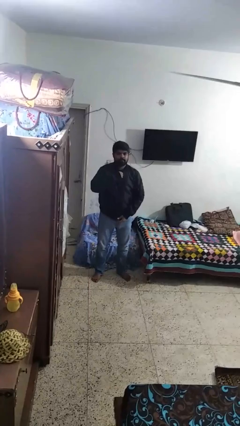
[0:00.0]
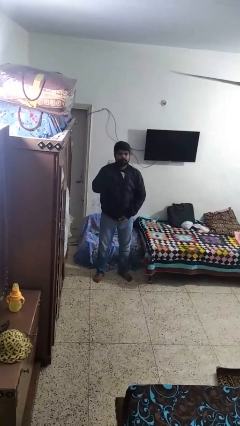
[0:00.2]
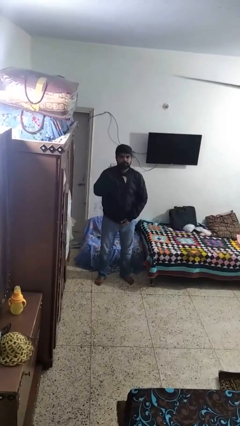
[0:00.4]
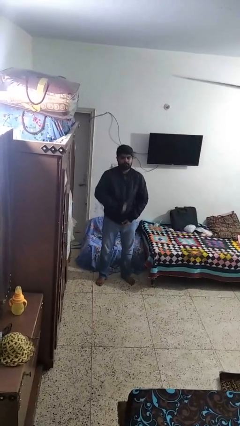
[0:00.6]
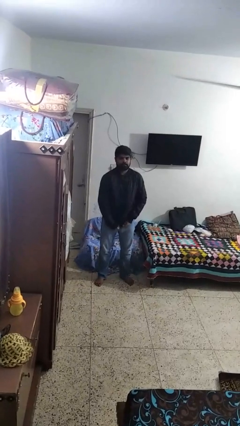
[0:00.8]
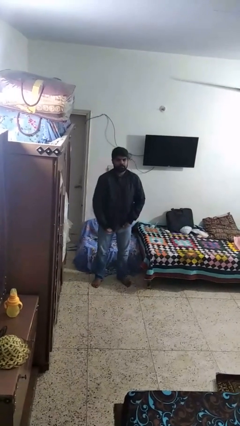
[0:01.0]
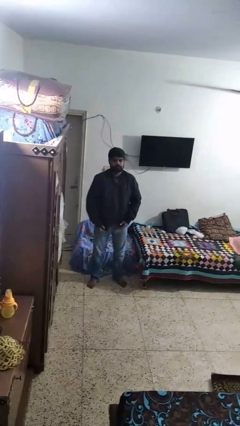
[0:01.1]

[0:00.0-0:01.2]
person unzips jacket

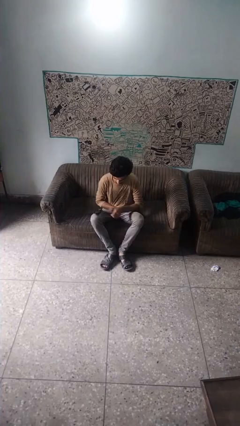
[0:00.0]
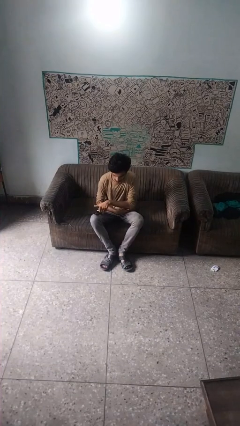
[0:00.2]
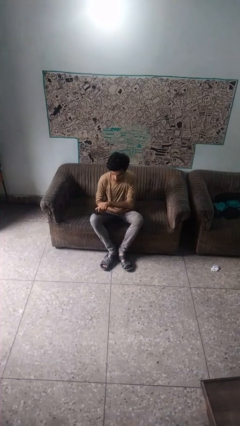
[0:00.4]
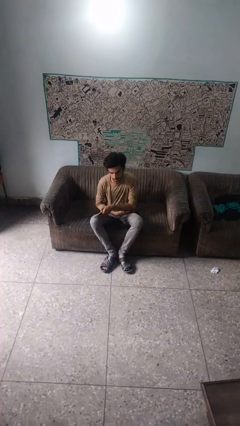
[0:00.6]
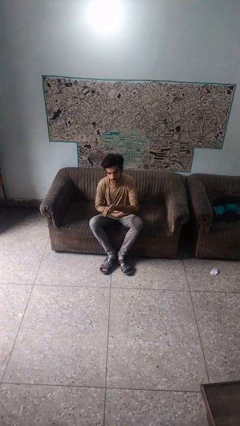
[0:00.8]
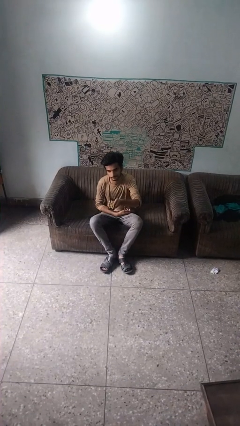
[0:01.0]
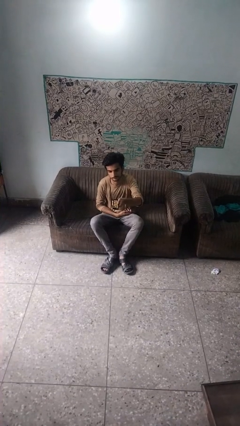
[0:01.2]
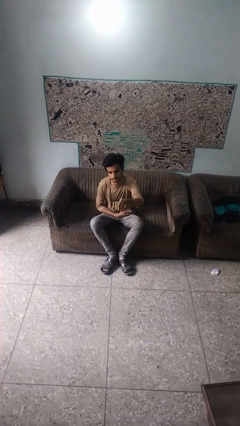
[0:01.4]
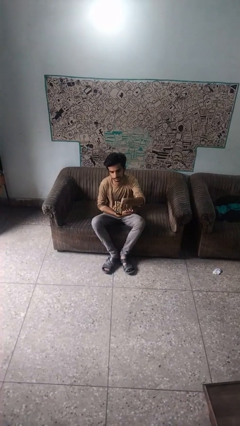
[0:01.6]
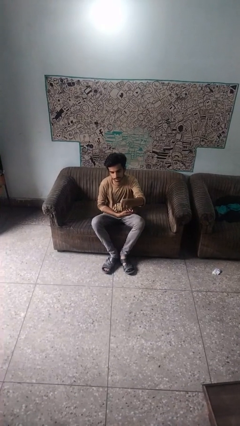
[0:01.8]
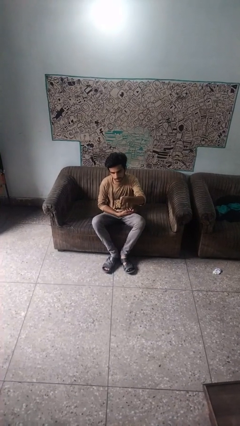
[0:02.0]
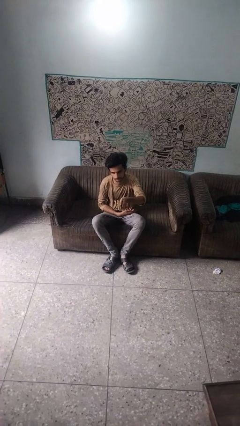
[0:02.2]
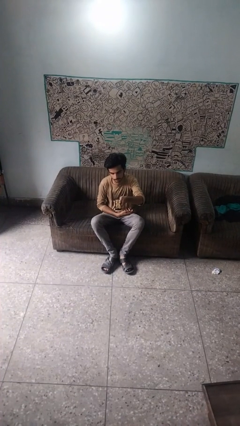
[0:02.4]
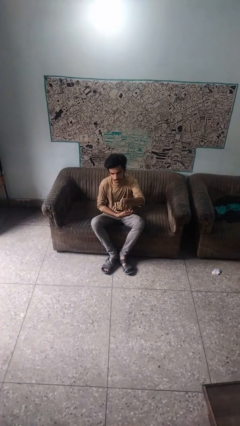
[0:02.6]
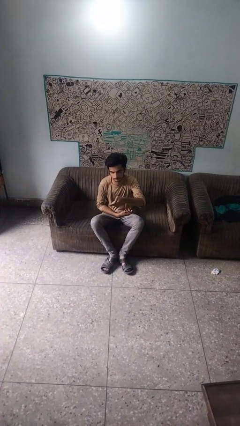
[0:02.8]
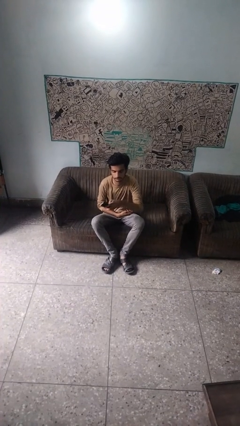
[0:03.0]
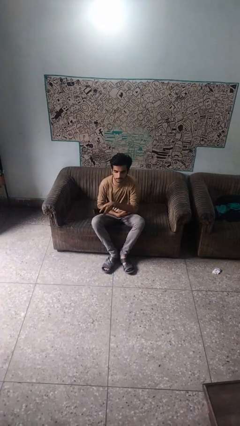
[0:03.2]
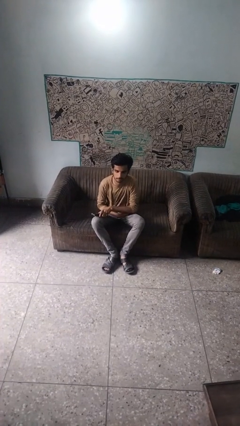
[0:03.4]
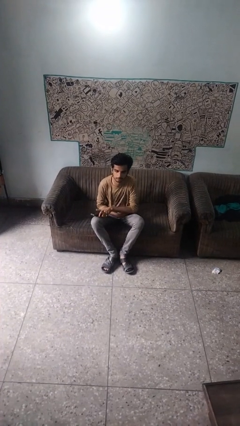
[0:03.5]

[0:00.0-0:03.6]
person uses television remote

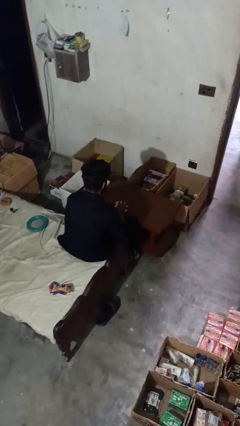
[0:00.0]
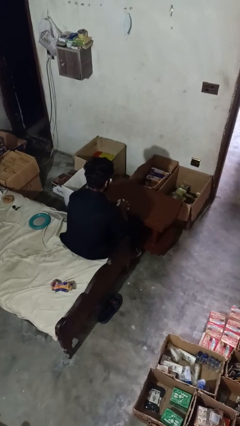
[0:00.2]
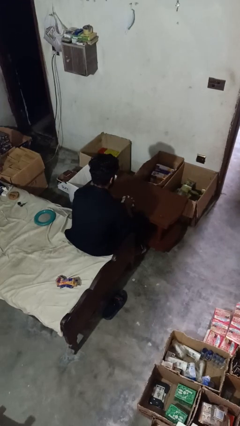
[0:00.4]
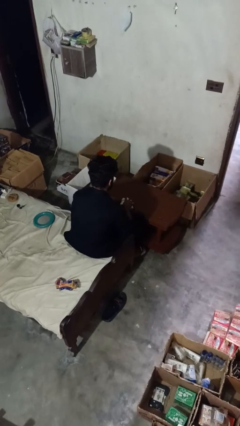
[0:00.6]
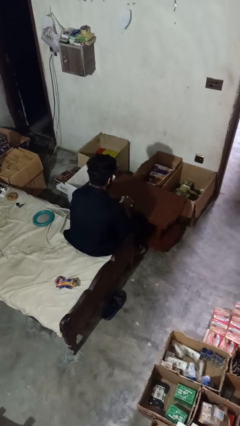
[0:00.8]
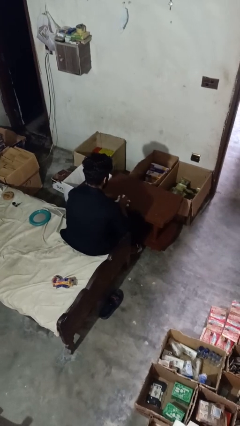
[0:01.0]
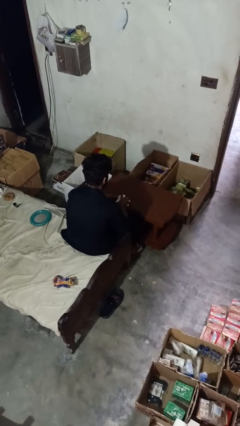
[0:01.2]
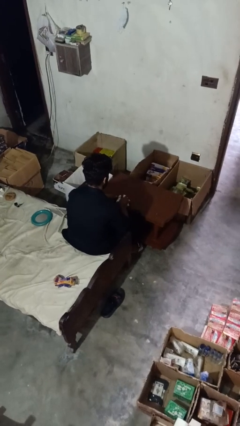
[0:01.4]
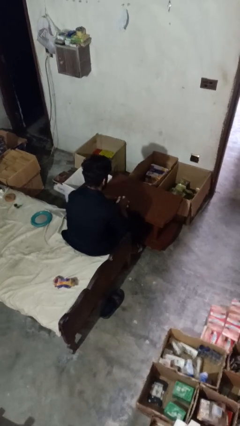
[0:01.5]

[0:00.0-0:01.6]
person cleans table with rag

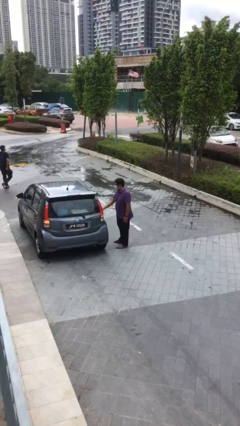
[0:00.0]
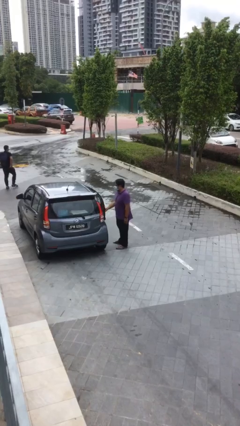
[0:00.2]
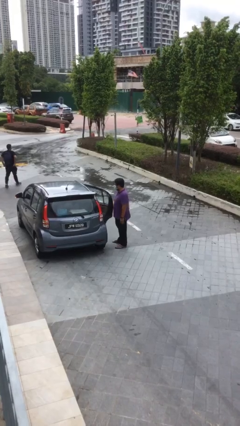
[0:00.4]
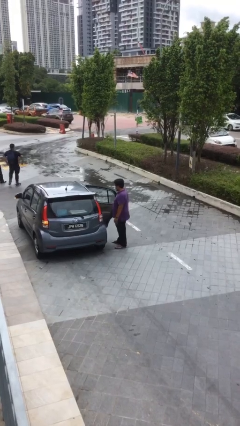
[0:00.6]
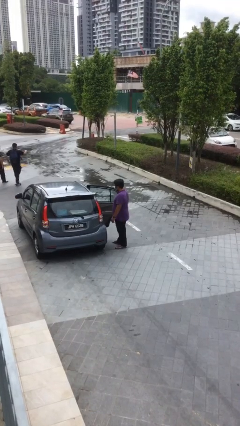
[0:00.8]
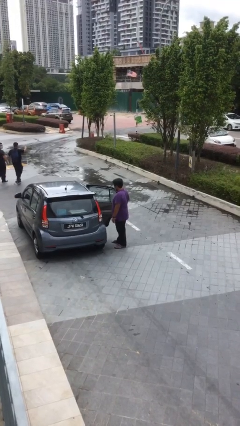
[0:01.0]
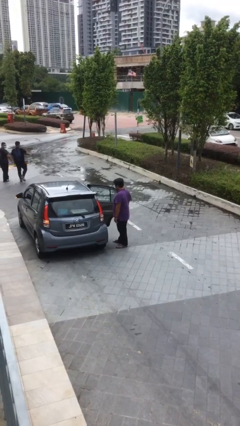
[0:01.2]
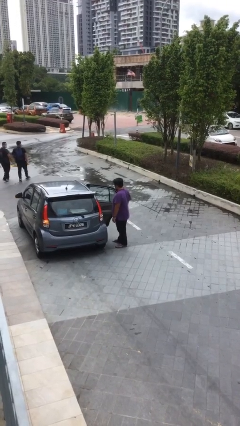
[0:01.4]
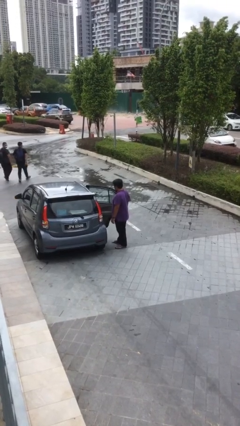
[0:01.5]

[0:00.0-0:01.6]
person opens car door

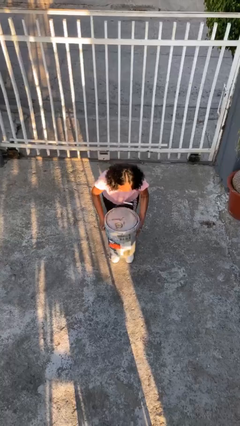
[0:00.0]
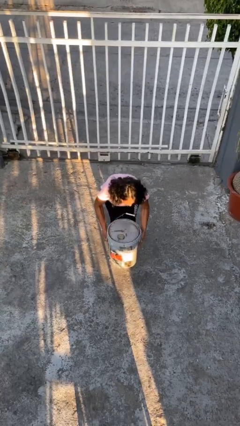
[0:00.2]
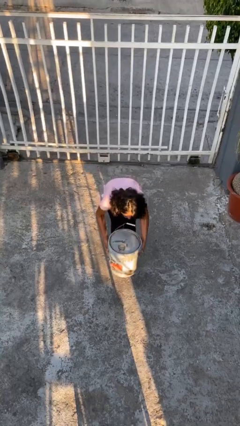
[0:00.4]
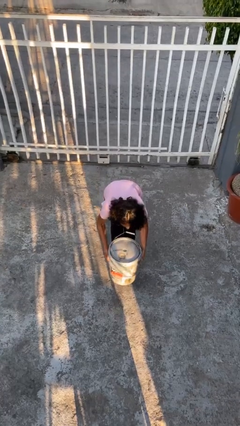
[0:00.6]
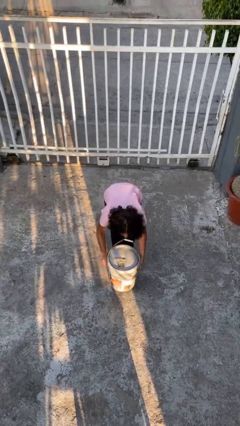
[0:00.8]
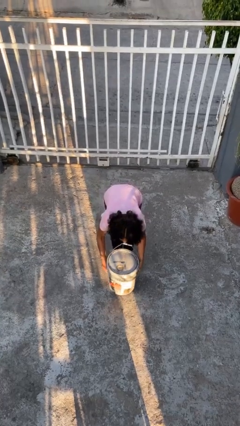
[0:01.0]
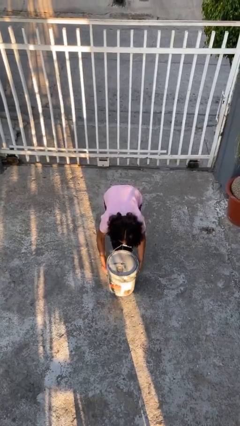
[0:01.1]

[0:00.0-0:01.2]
person puts down object on floor

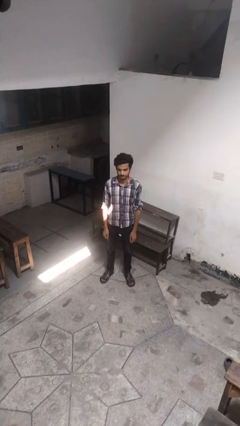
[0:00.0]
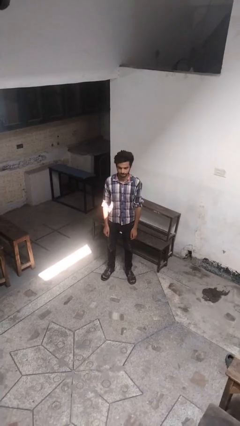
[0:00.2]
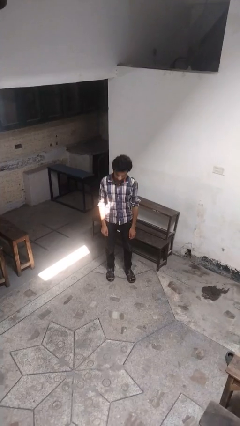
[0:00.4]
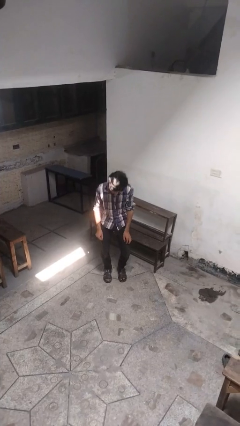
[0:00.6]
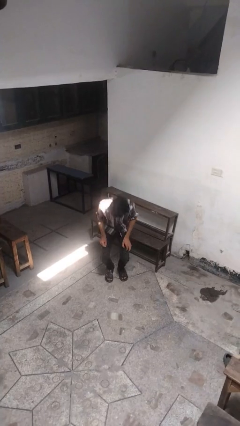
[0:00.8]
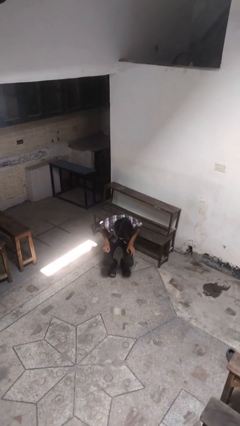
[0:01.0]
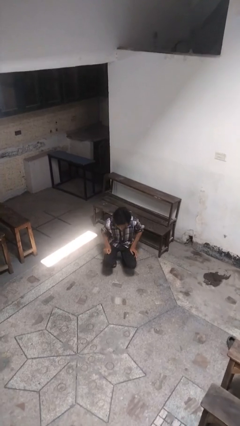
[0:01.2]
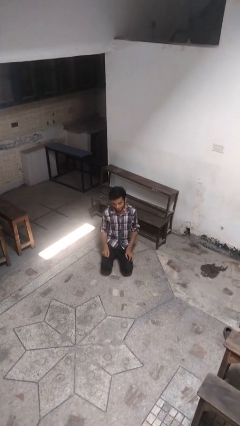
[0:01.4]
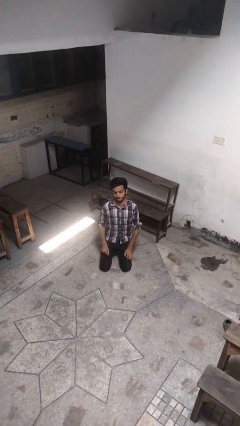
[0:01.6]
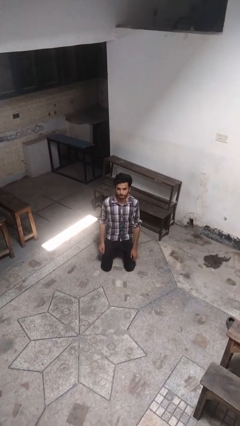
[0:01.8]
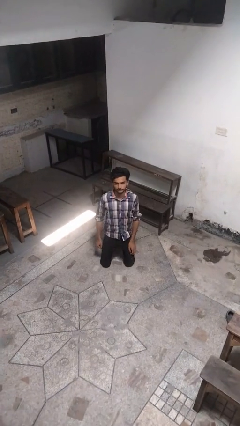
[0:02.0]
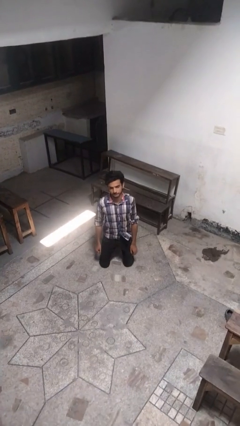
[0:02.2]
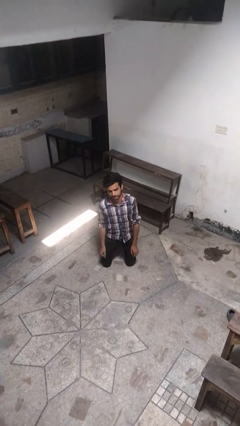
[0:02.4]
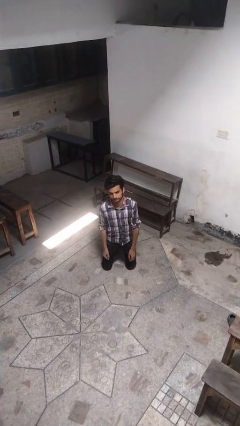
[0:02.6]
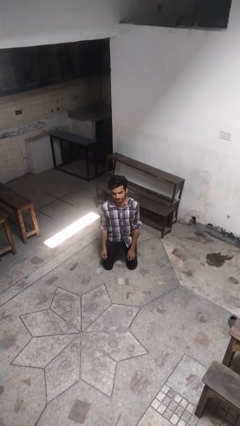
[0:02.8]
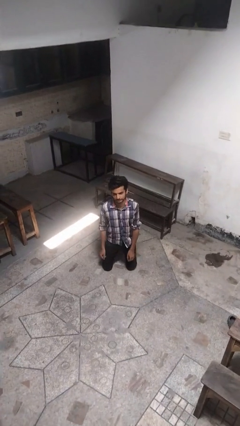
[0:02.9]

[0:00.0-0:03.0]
person kneels

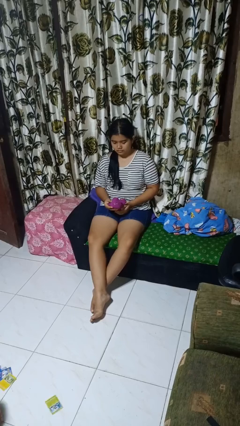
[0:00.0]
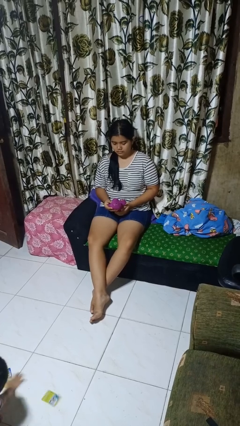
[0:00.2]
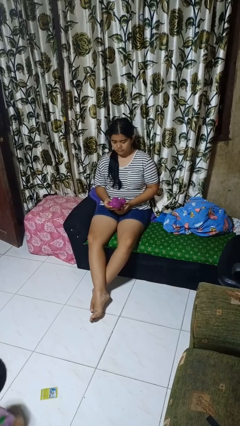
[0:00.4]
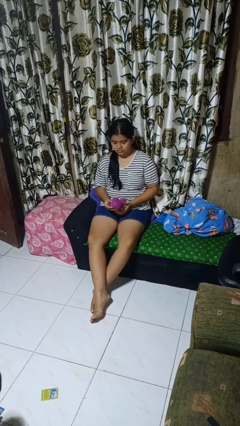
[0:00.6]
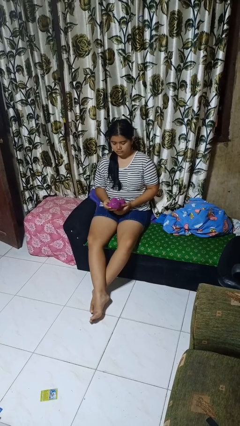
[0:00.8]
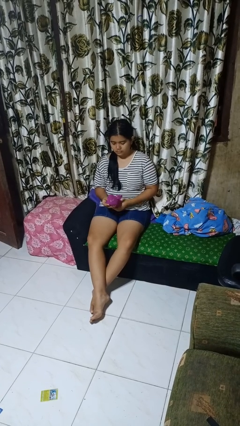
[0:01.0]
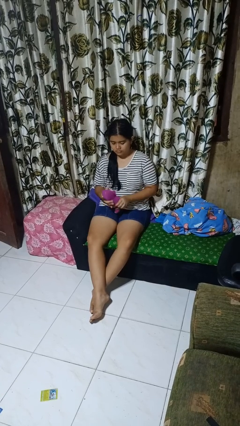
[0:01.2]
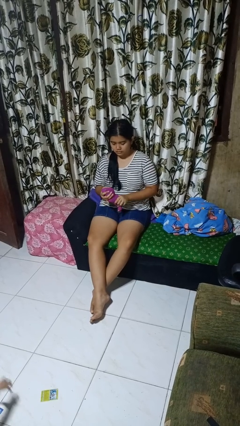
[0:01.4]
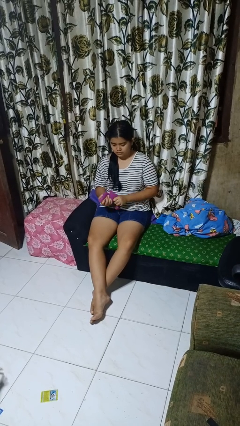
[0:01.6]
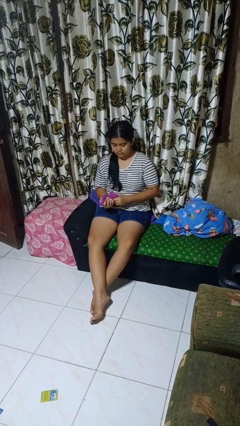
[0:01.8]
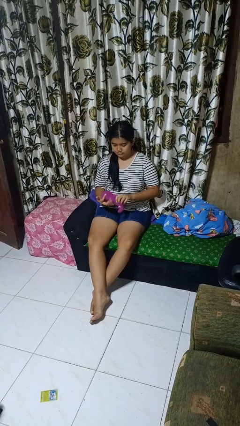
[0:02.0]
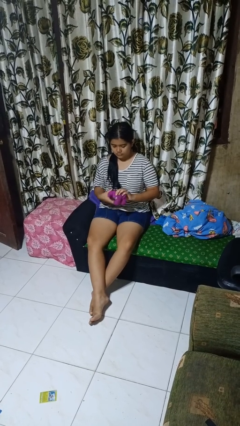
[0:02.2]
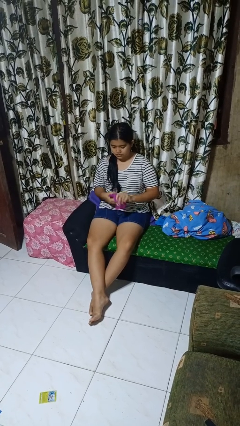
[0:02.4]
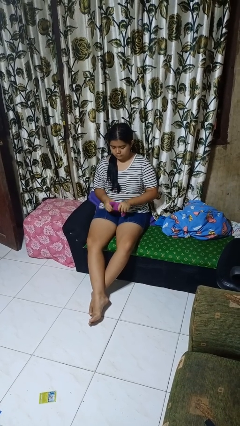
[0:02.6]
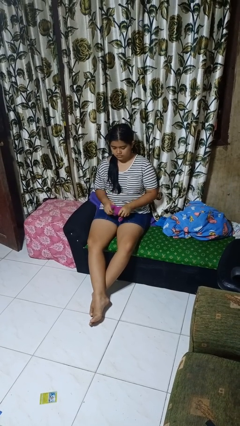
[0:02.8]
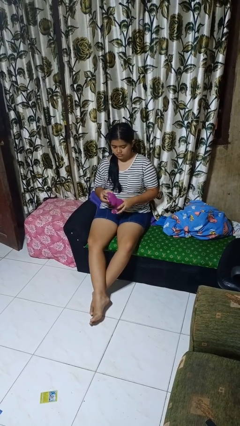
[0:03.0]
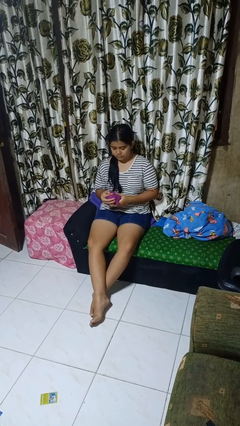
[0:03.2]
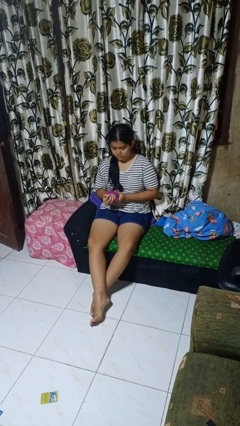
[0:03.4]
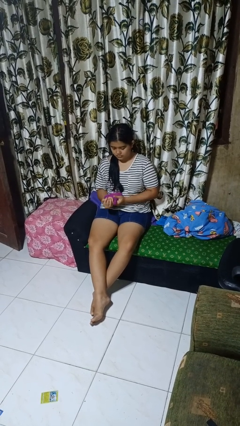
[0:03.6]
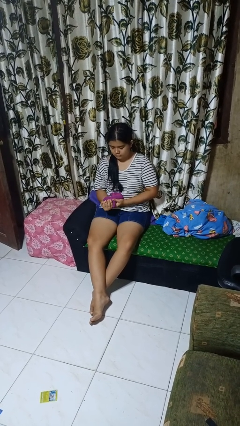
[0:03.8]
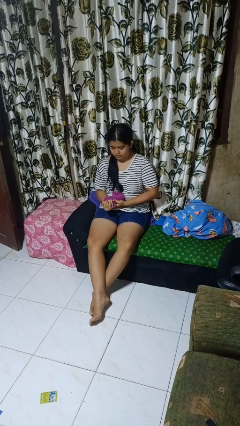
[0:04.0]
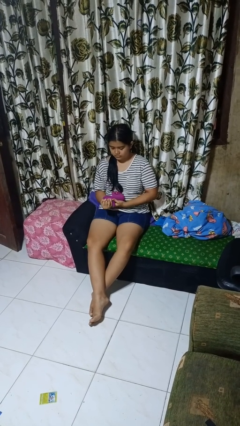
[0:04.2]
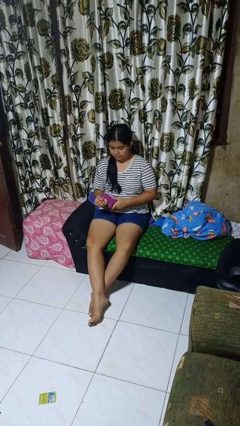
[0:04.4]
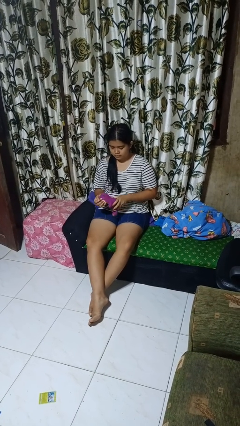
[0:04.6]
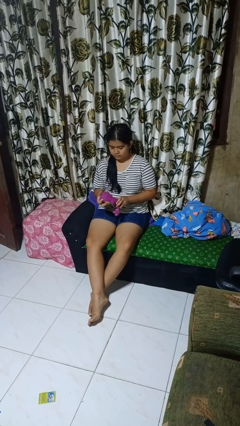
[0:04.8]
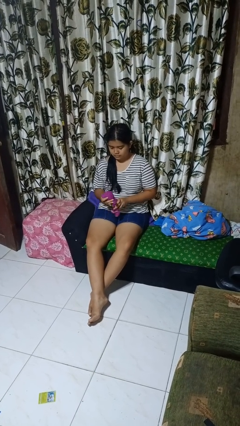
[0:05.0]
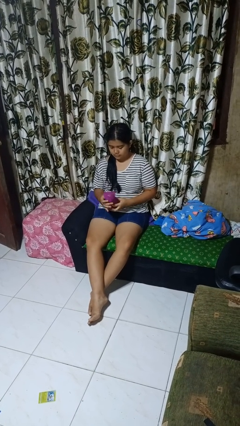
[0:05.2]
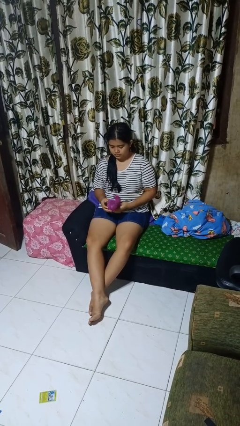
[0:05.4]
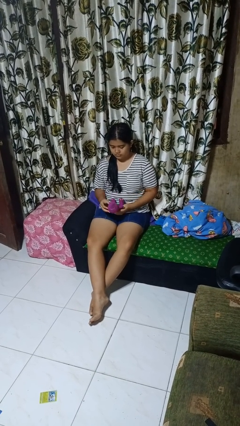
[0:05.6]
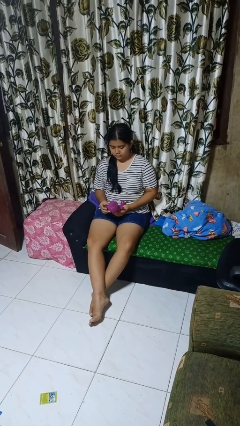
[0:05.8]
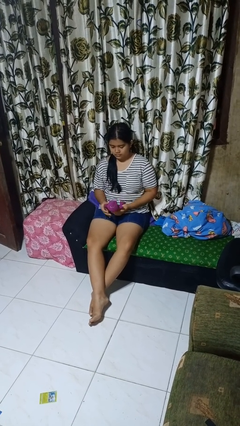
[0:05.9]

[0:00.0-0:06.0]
person squeezes object
